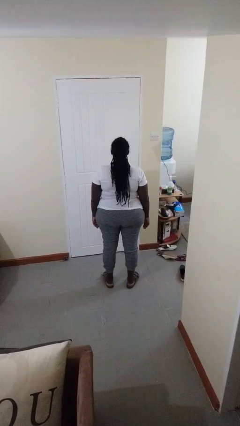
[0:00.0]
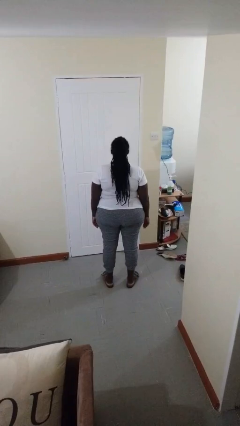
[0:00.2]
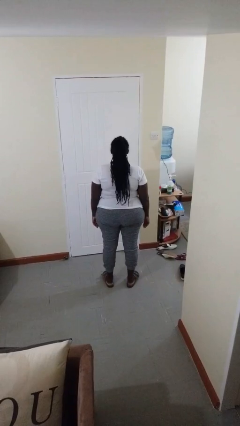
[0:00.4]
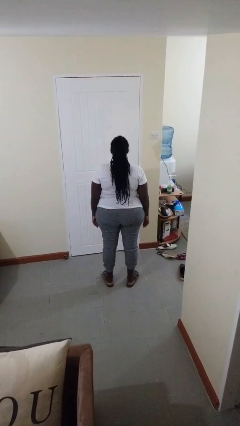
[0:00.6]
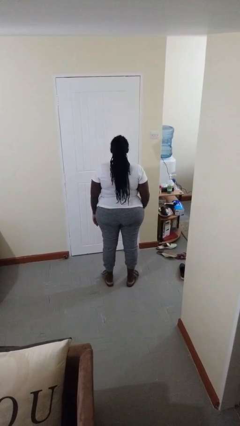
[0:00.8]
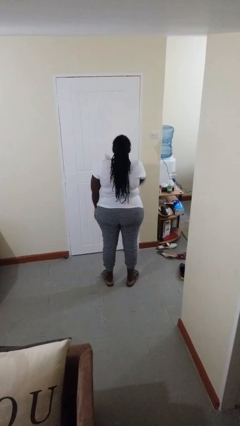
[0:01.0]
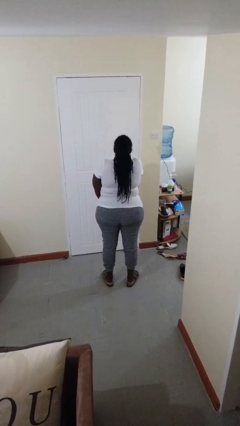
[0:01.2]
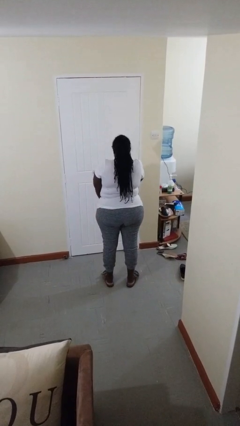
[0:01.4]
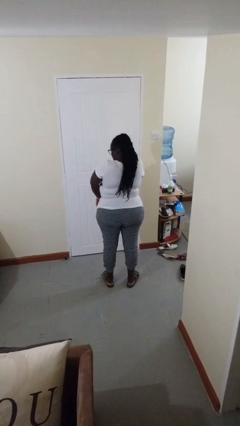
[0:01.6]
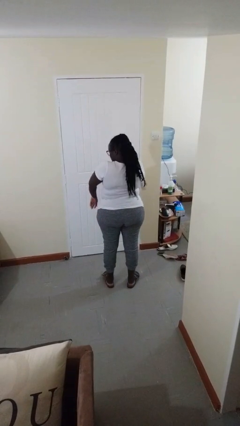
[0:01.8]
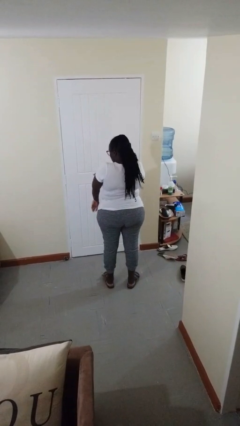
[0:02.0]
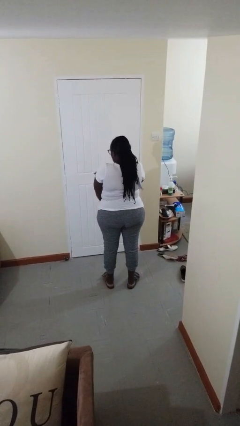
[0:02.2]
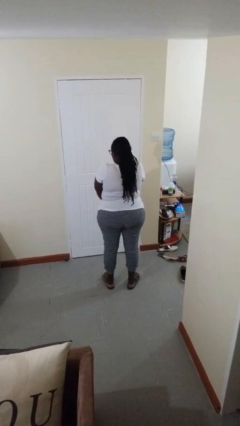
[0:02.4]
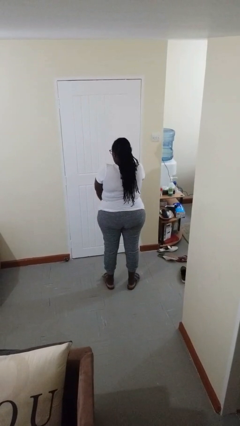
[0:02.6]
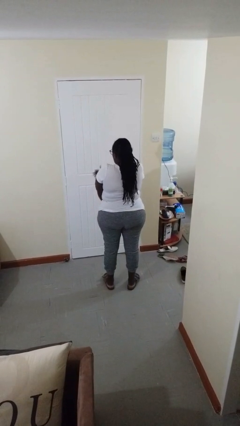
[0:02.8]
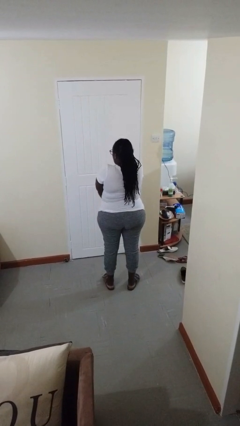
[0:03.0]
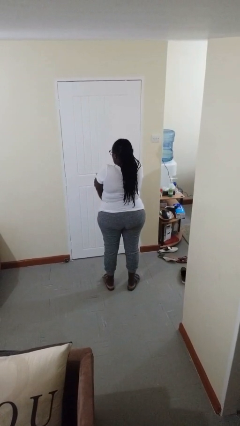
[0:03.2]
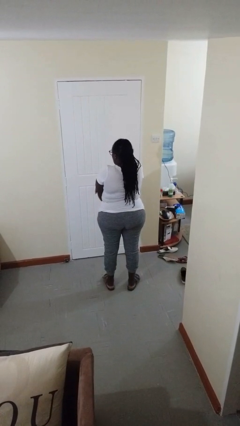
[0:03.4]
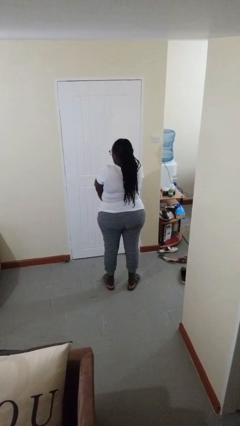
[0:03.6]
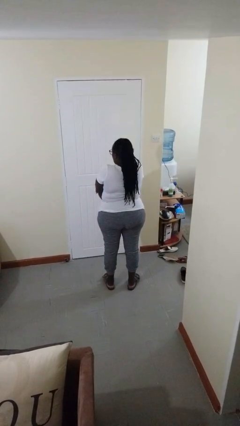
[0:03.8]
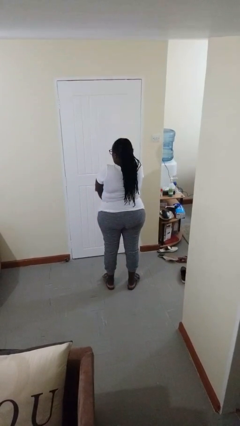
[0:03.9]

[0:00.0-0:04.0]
person swats bug

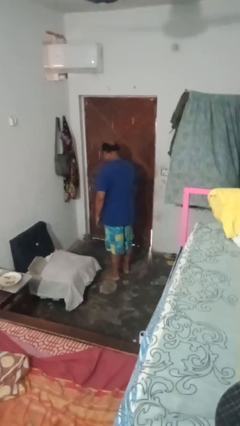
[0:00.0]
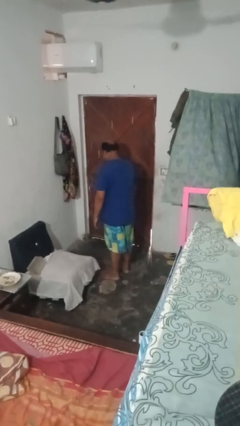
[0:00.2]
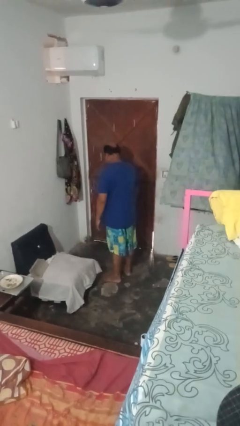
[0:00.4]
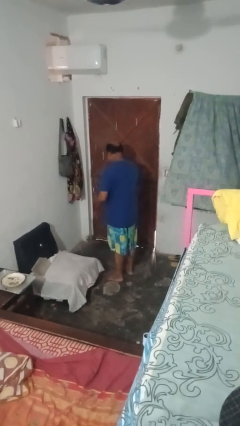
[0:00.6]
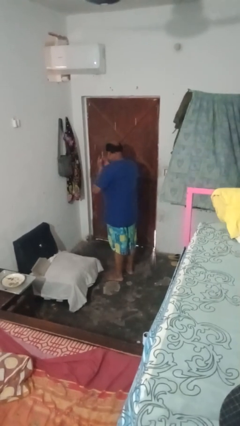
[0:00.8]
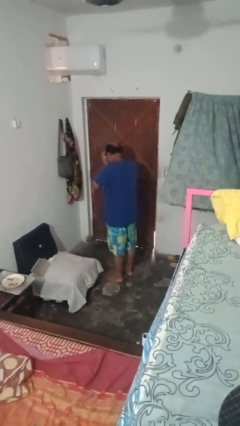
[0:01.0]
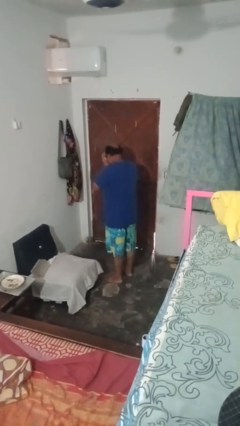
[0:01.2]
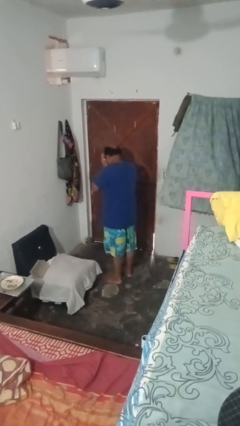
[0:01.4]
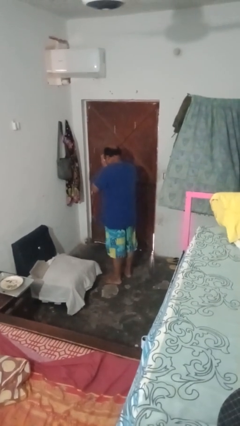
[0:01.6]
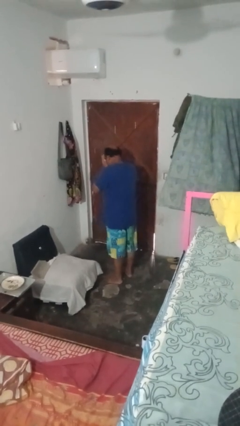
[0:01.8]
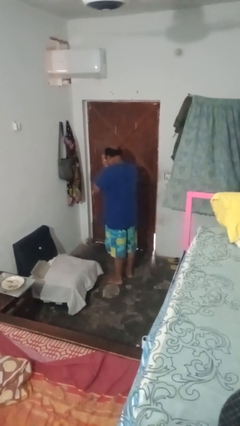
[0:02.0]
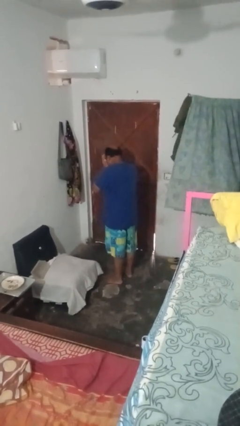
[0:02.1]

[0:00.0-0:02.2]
person covers face with hands

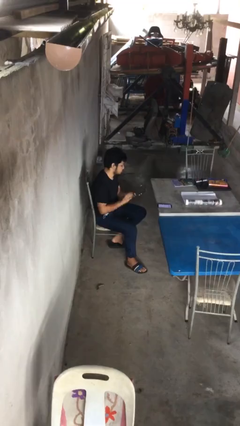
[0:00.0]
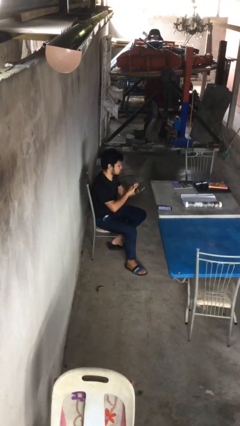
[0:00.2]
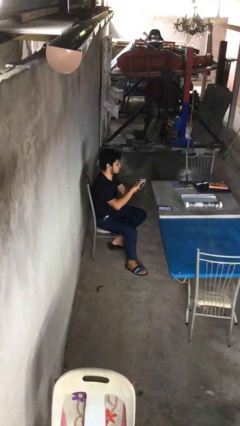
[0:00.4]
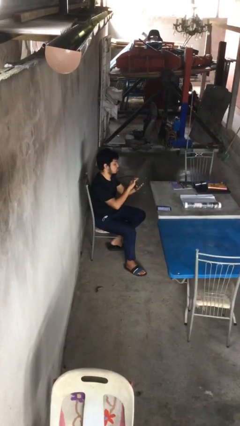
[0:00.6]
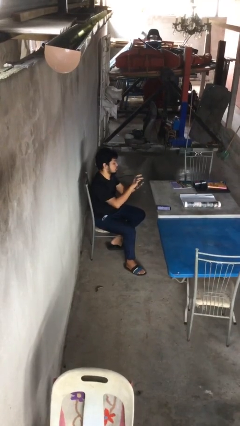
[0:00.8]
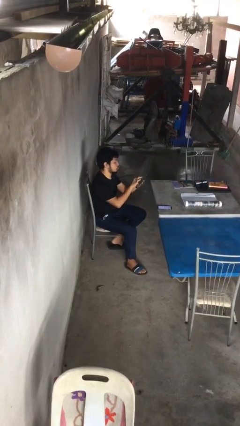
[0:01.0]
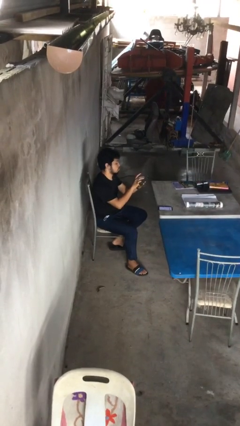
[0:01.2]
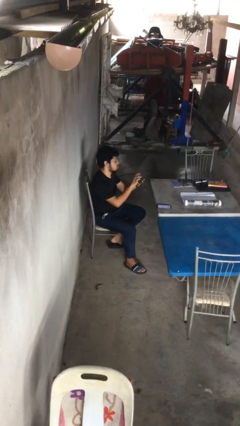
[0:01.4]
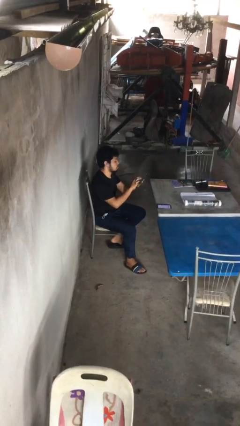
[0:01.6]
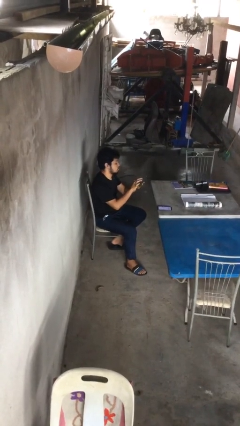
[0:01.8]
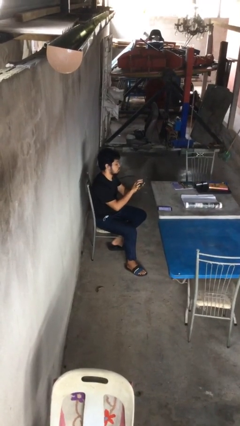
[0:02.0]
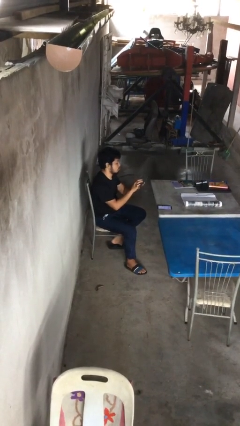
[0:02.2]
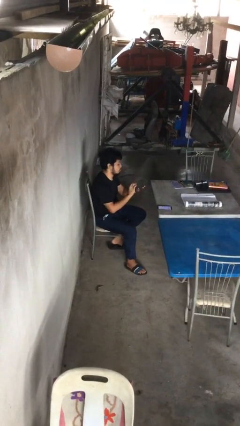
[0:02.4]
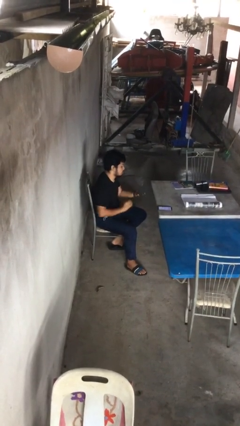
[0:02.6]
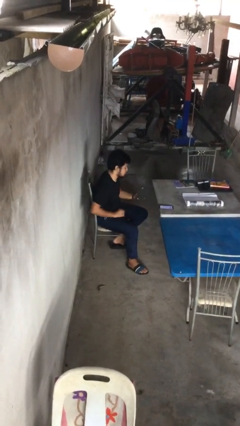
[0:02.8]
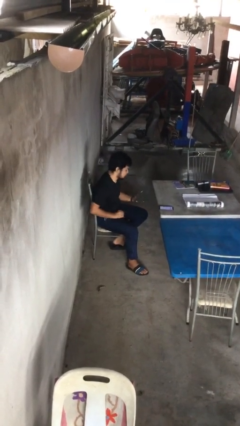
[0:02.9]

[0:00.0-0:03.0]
person interacts with tablet

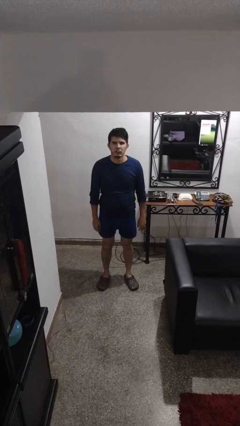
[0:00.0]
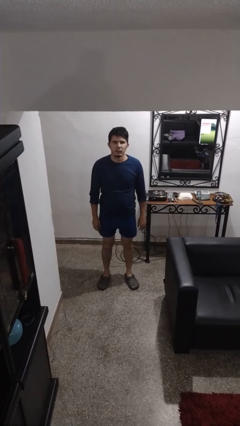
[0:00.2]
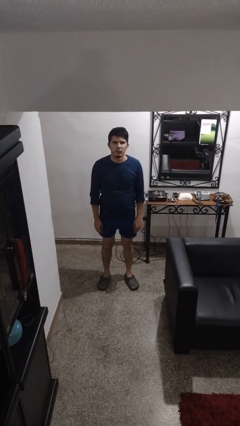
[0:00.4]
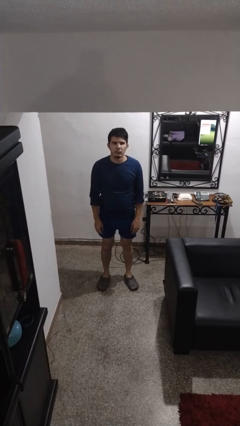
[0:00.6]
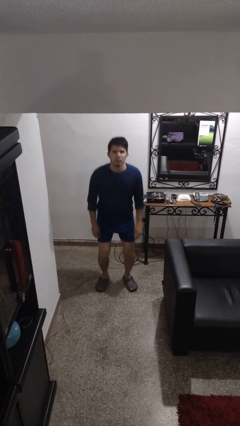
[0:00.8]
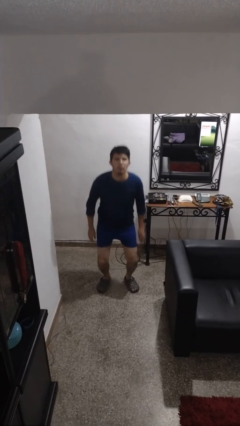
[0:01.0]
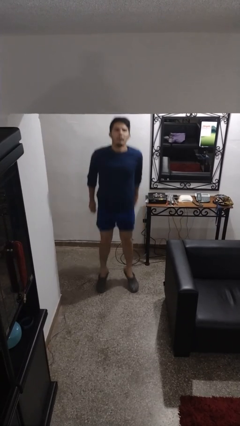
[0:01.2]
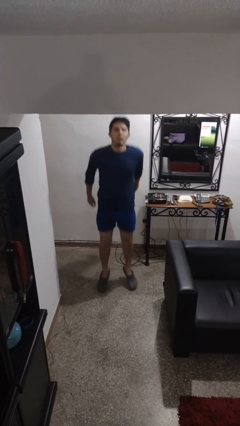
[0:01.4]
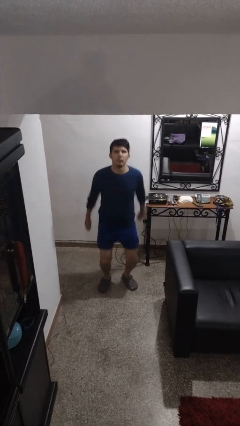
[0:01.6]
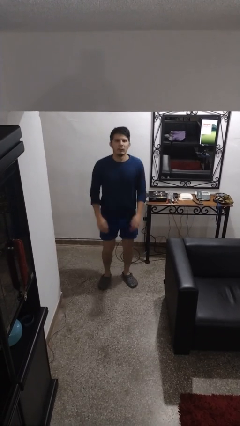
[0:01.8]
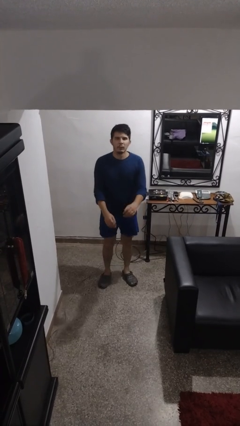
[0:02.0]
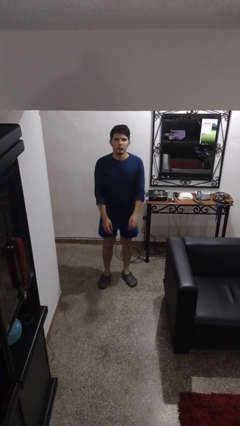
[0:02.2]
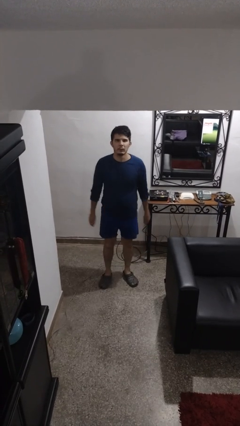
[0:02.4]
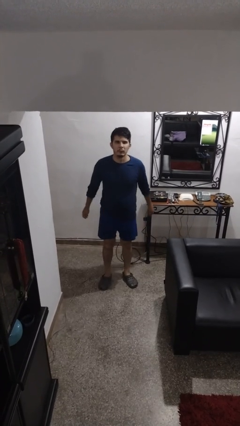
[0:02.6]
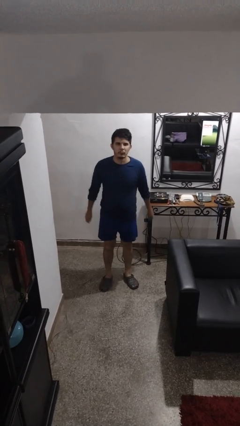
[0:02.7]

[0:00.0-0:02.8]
person jumps

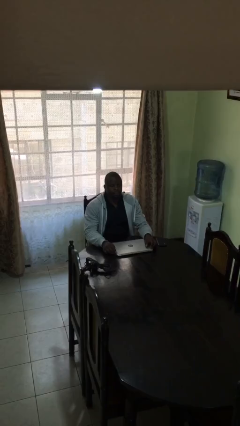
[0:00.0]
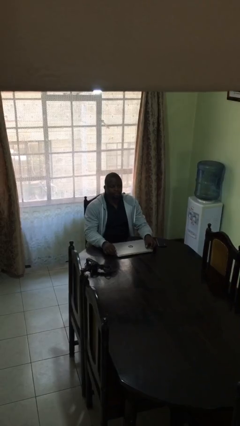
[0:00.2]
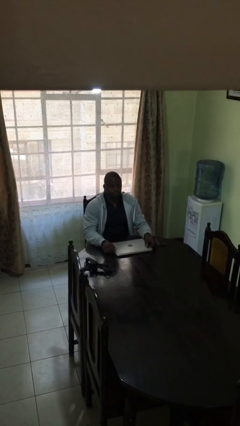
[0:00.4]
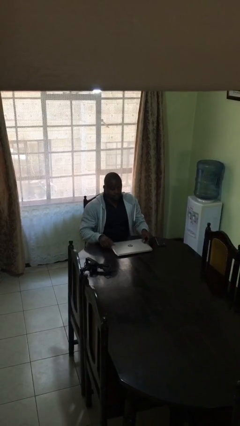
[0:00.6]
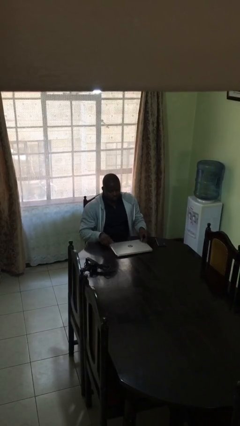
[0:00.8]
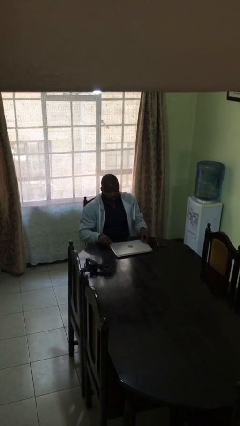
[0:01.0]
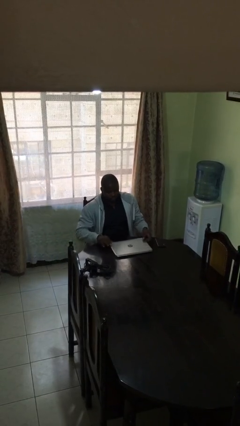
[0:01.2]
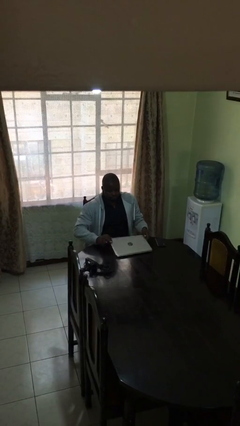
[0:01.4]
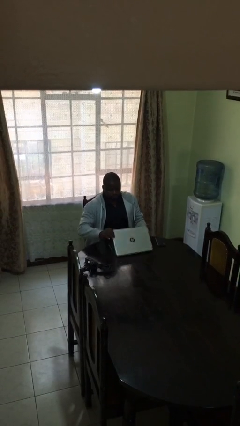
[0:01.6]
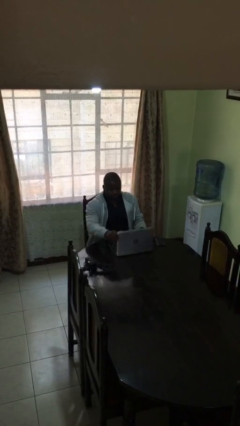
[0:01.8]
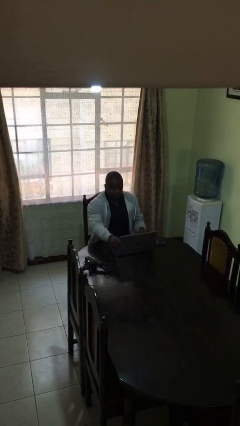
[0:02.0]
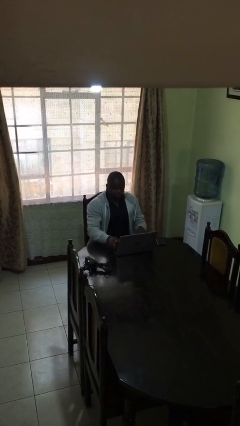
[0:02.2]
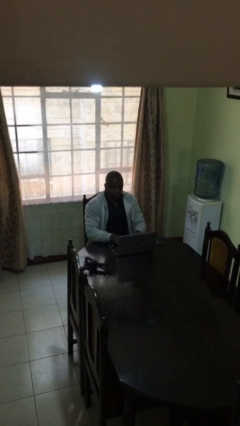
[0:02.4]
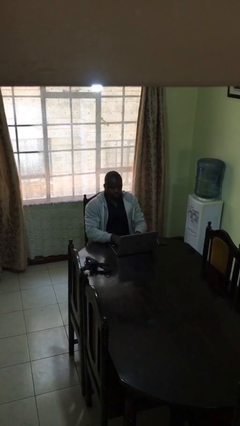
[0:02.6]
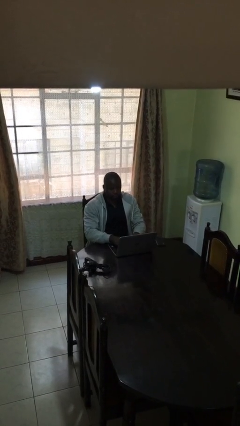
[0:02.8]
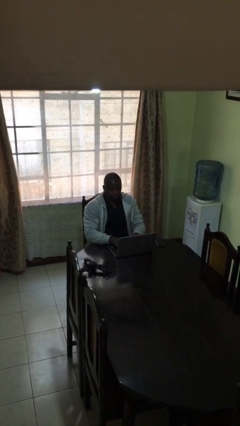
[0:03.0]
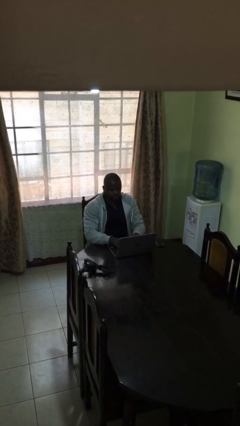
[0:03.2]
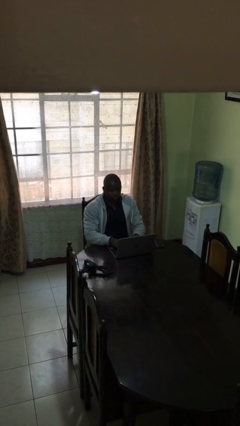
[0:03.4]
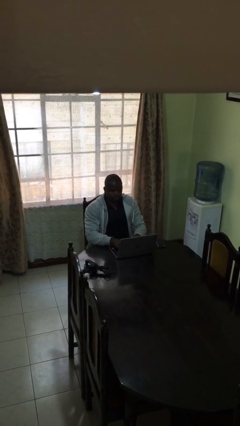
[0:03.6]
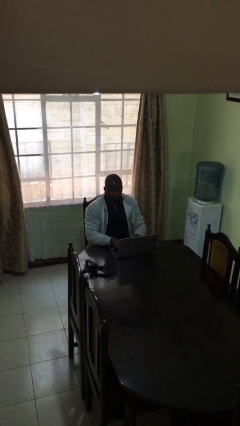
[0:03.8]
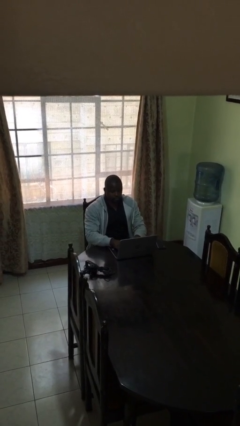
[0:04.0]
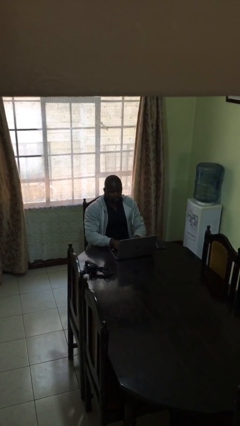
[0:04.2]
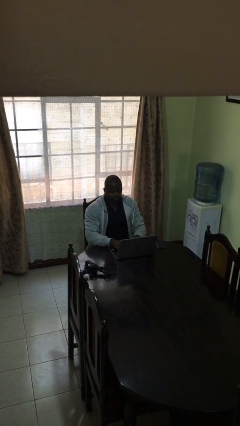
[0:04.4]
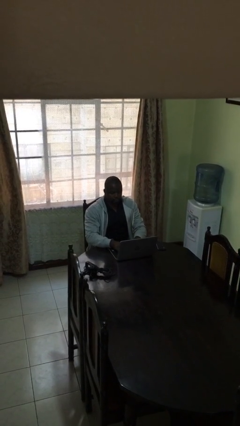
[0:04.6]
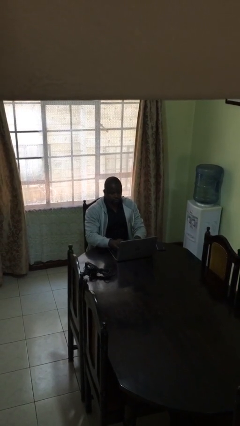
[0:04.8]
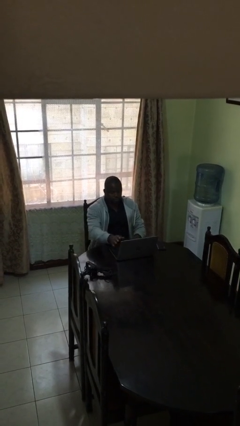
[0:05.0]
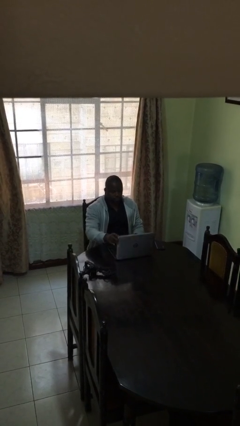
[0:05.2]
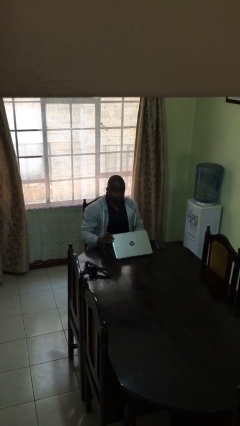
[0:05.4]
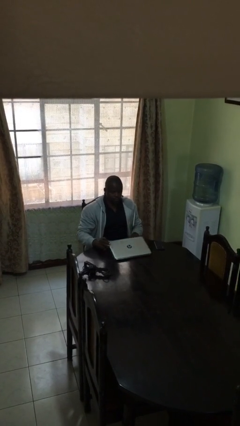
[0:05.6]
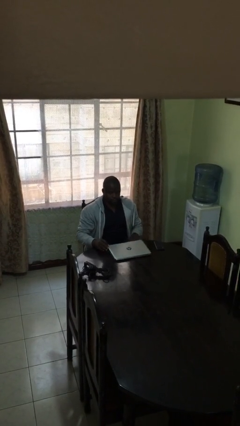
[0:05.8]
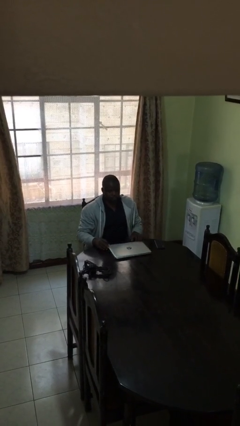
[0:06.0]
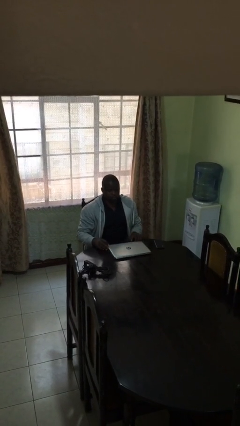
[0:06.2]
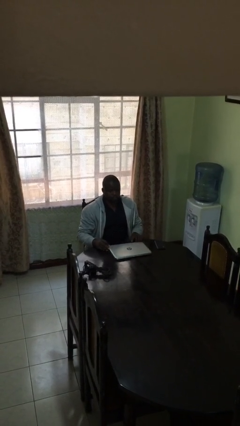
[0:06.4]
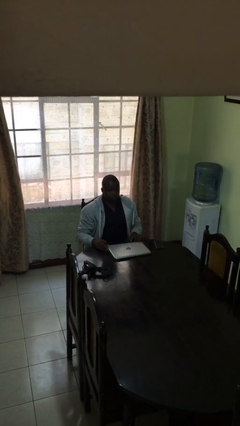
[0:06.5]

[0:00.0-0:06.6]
person interacts with laptop
